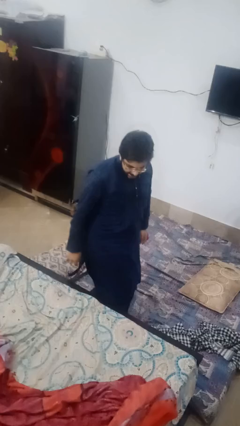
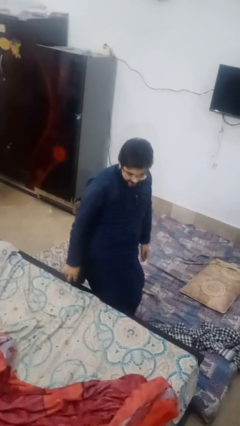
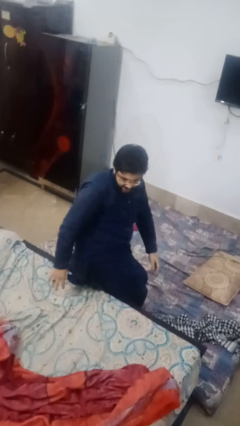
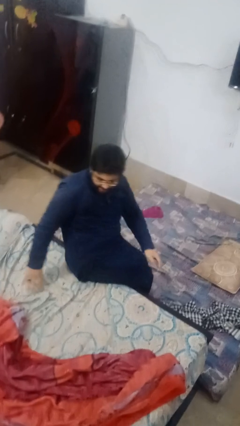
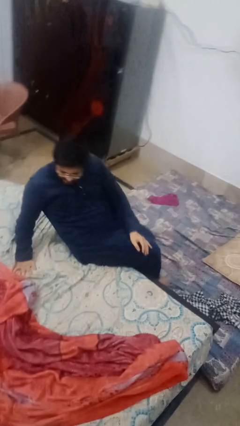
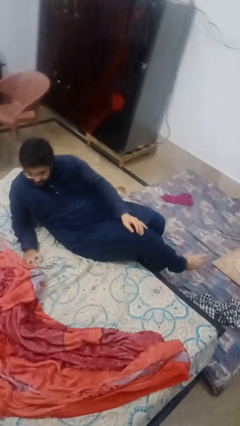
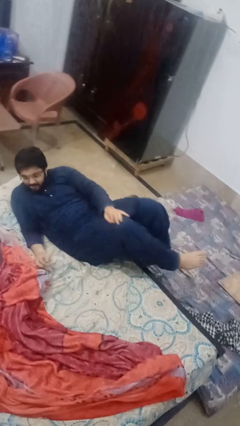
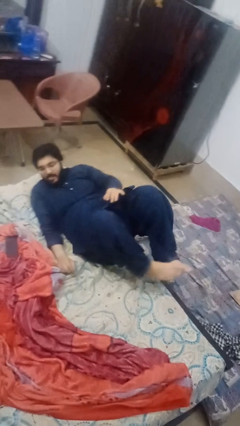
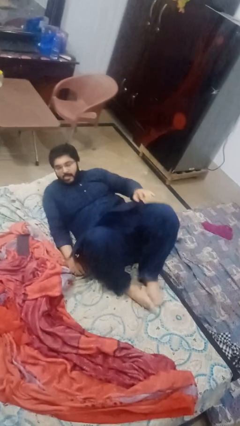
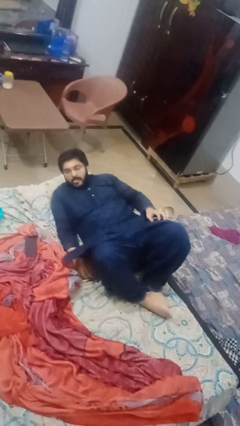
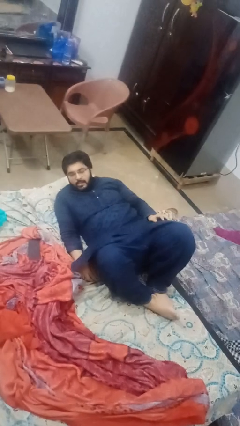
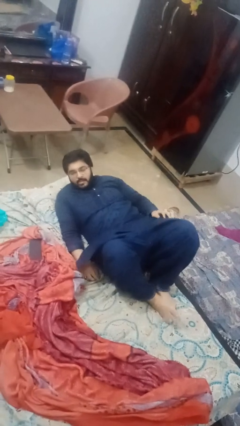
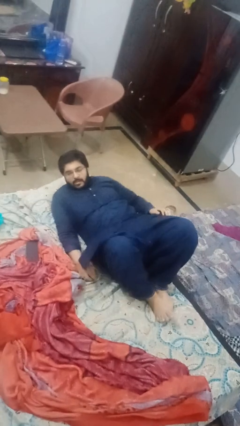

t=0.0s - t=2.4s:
person lies down on bed

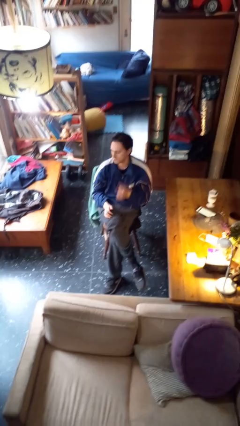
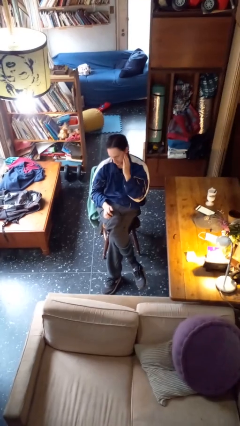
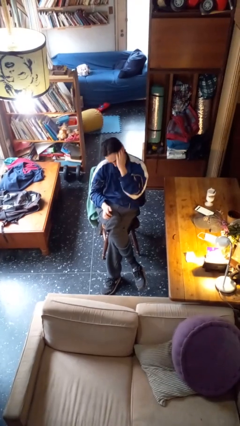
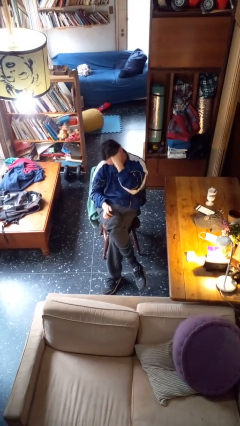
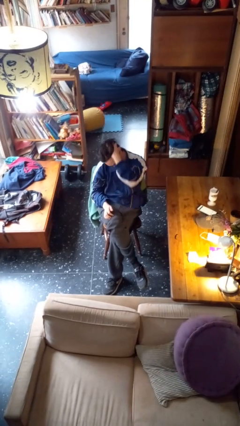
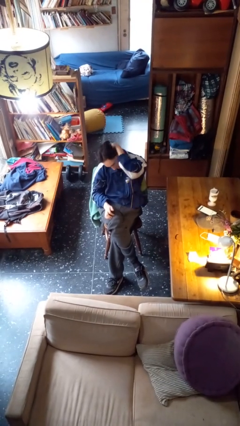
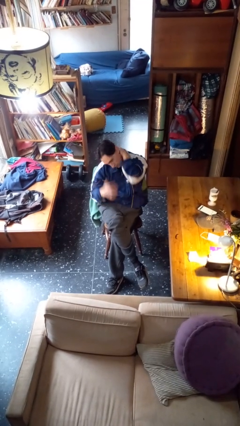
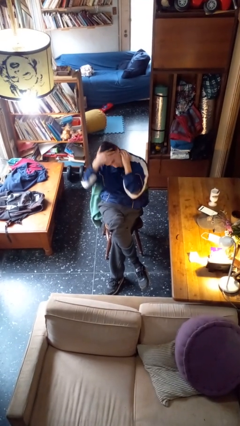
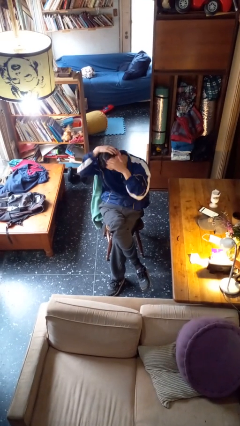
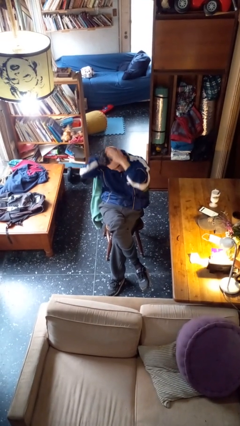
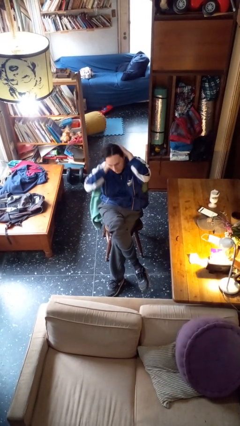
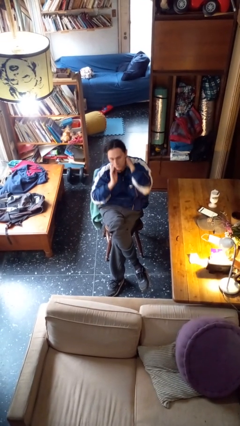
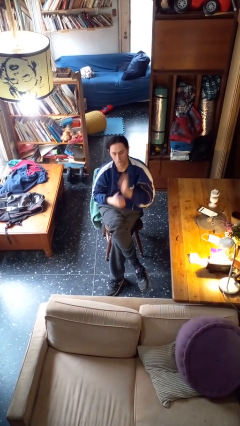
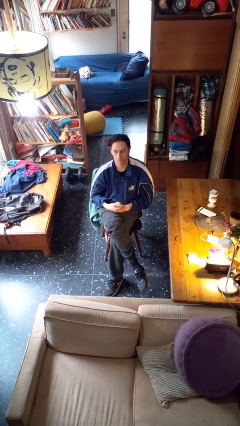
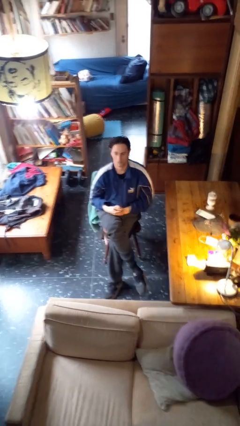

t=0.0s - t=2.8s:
person strokes hair

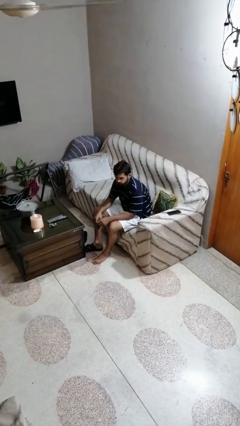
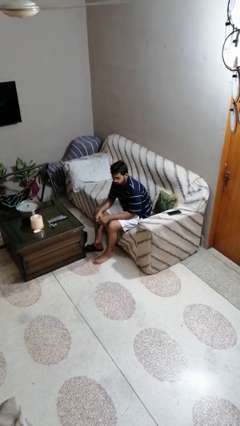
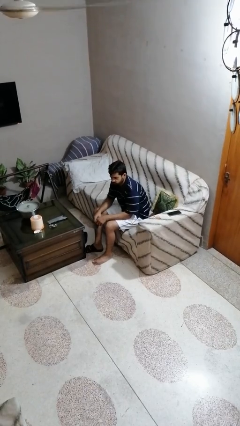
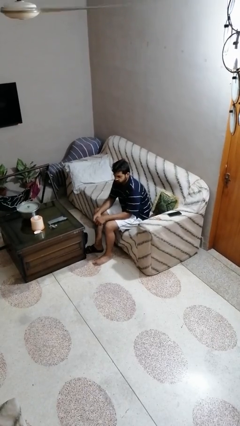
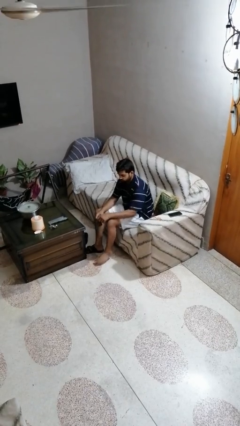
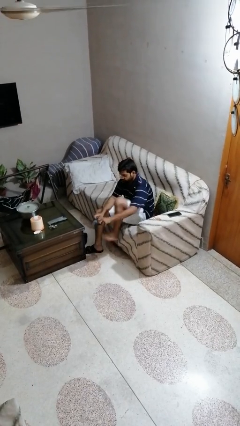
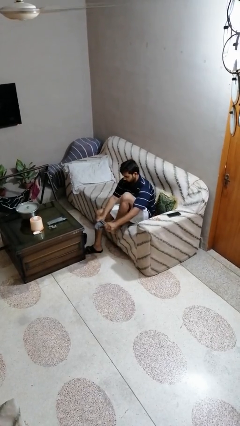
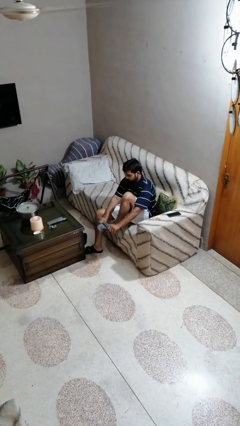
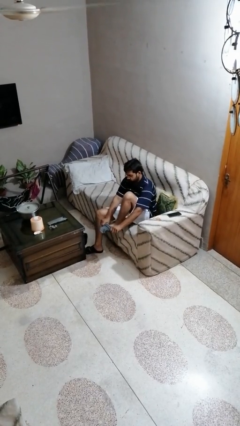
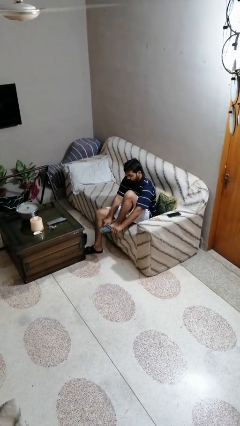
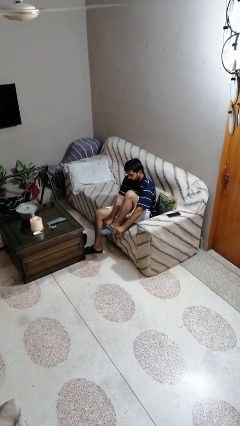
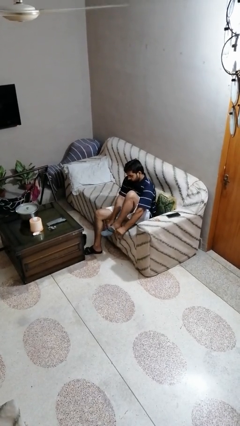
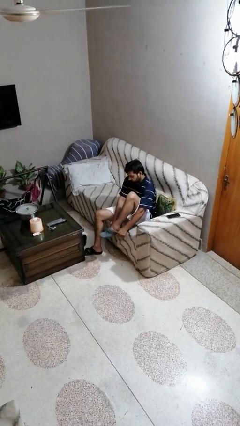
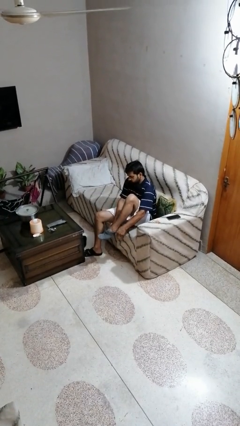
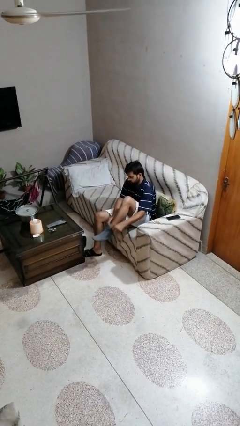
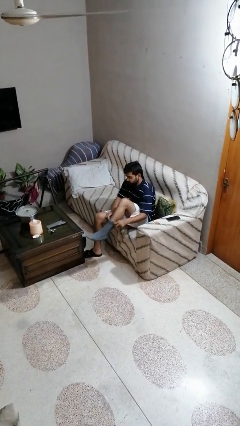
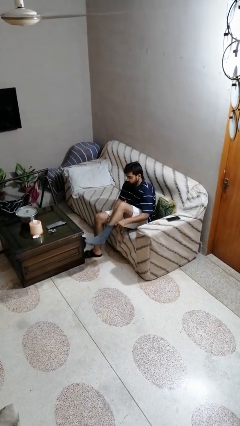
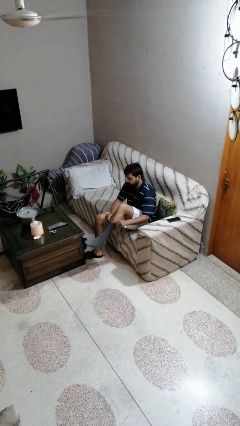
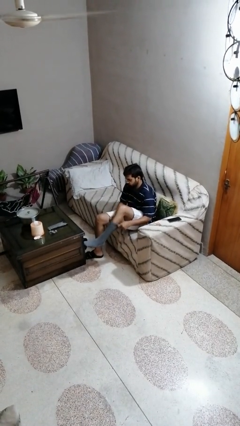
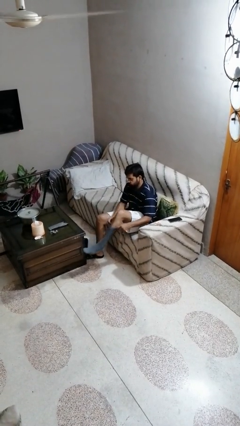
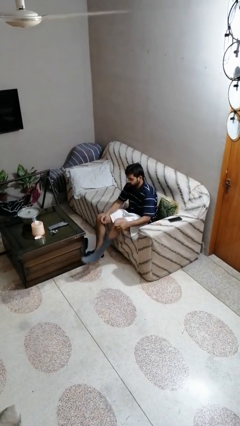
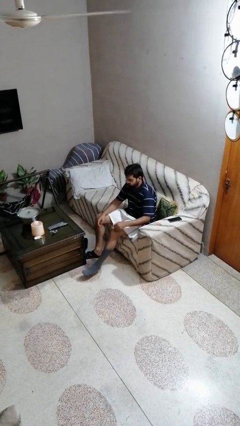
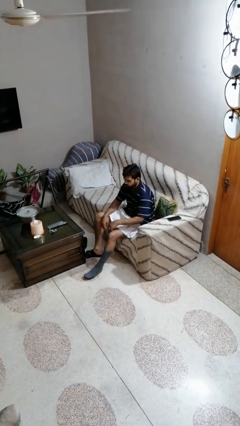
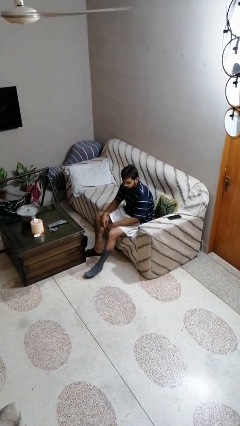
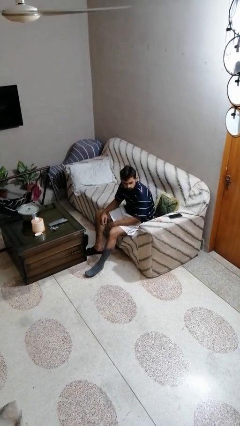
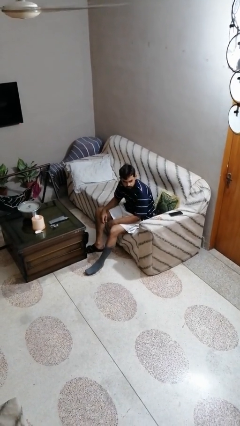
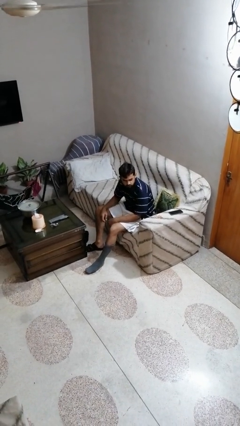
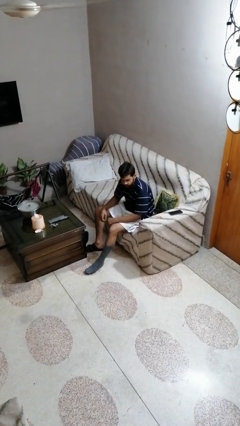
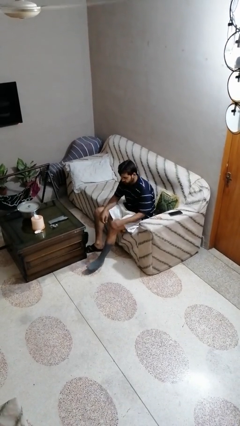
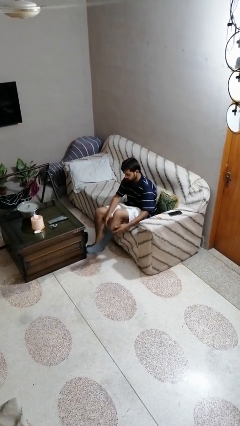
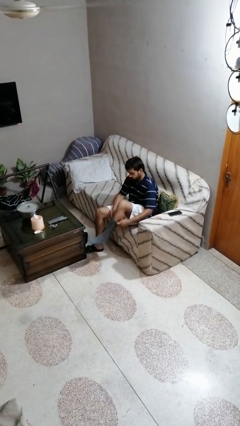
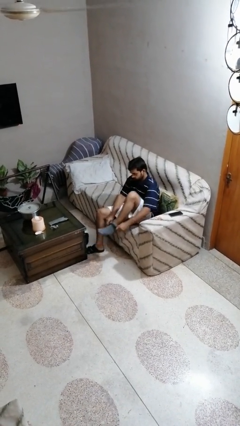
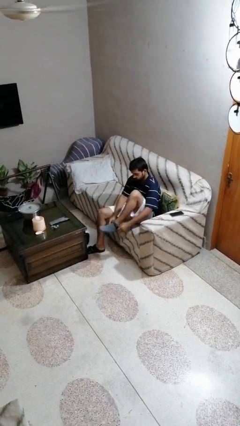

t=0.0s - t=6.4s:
person puts on socks

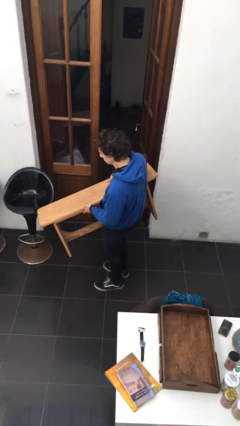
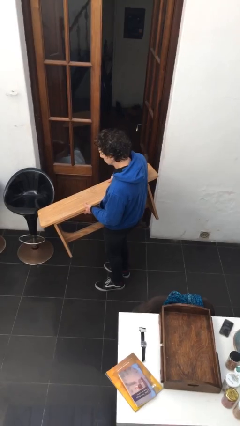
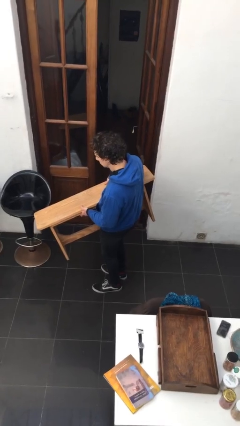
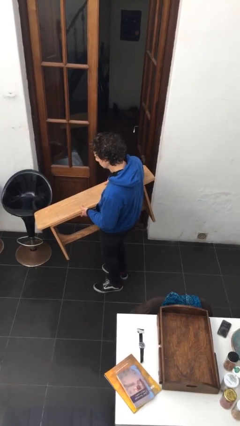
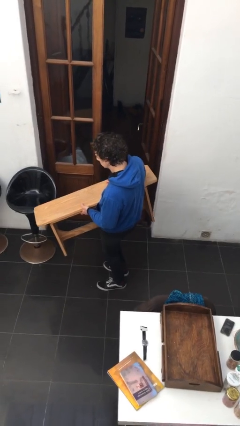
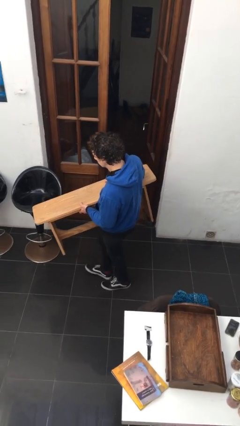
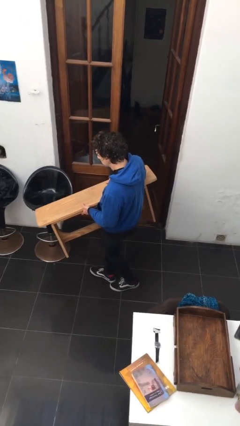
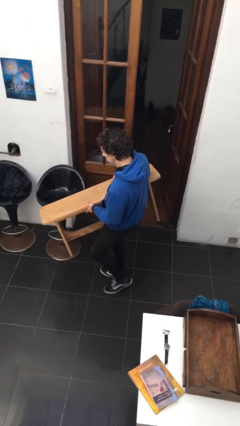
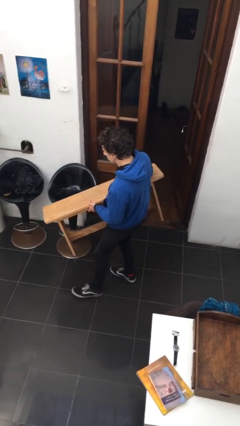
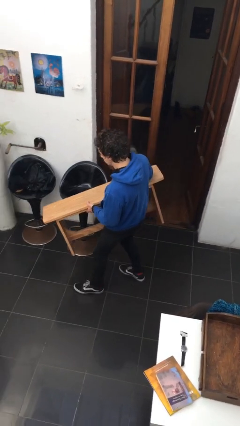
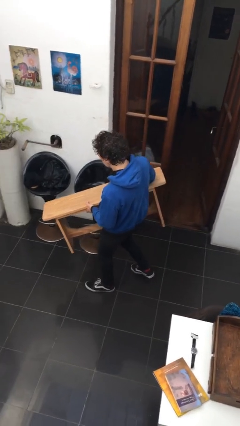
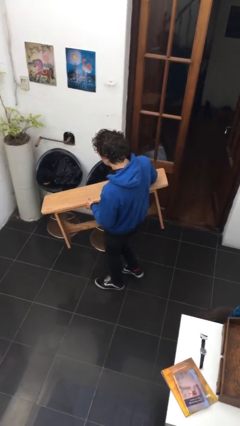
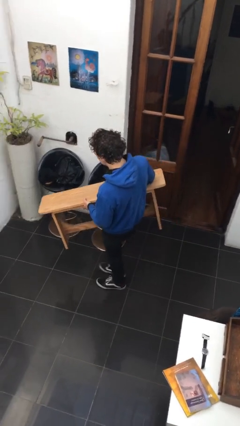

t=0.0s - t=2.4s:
person carries furniture

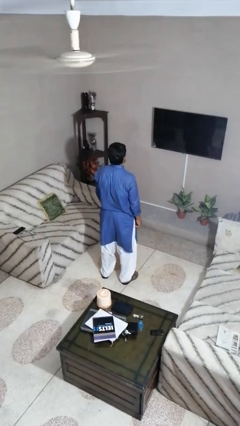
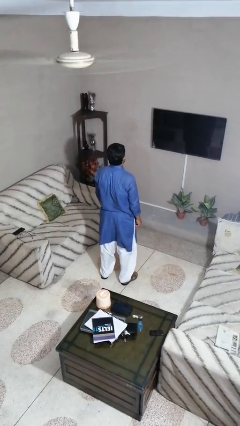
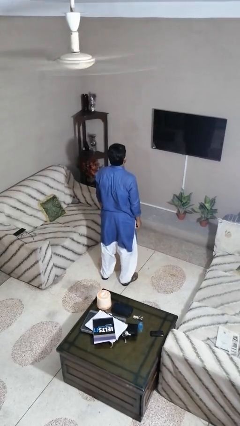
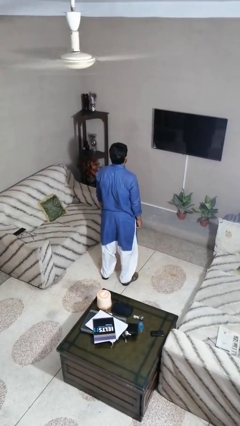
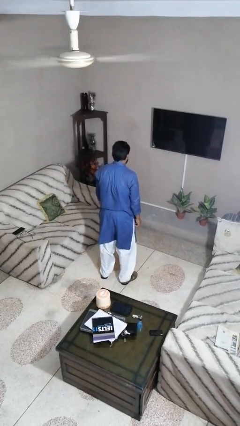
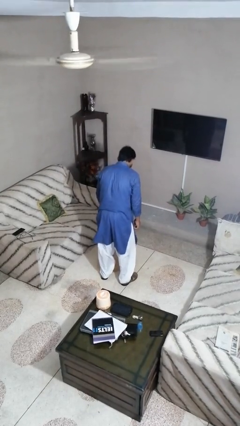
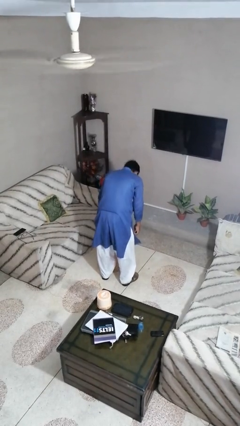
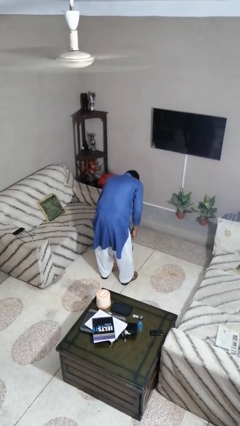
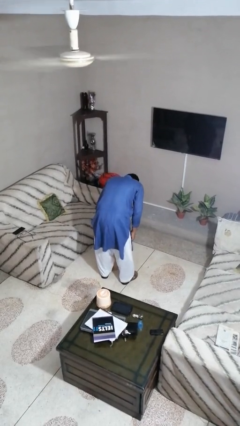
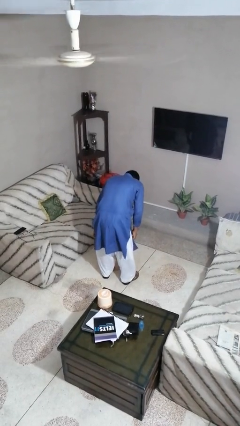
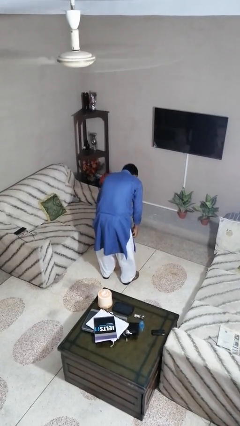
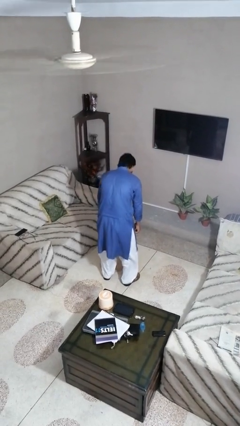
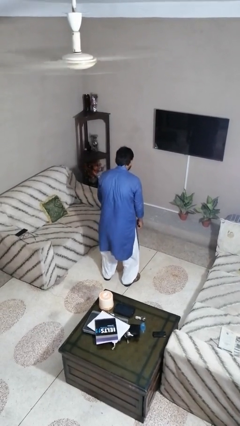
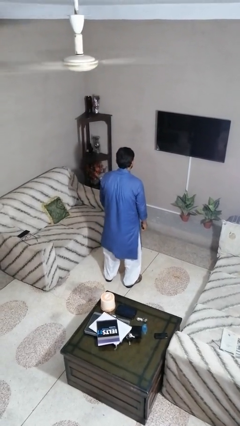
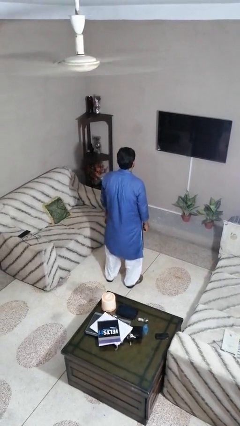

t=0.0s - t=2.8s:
person bows

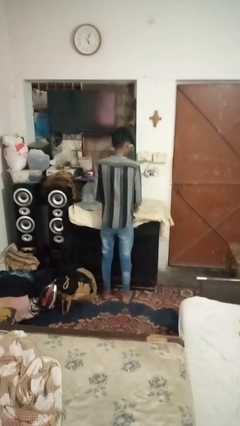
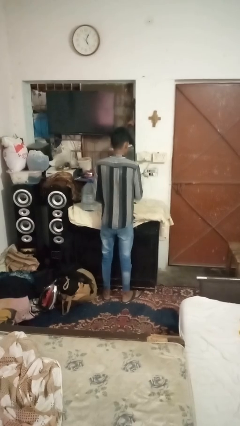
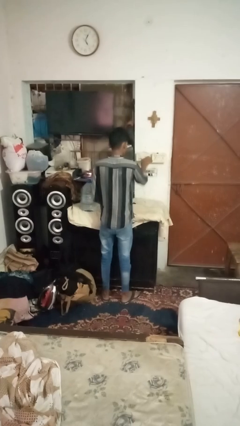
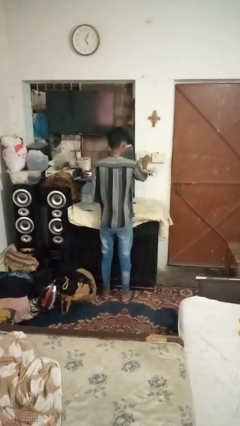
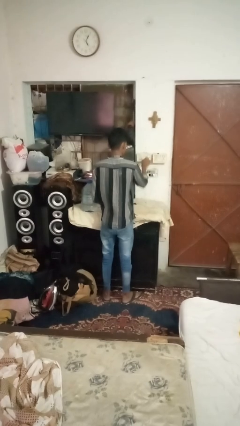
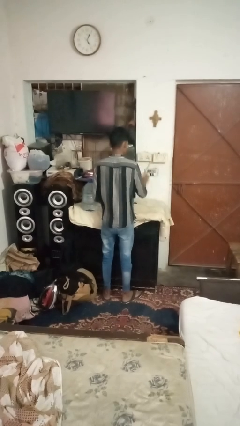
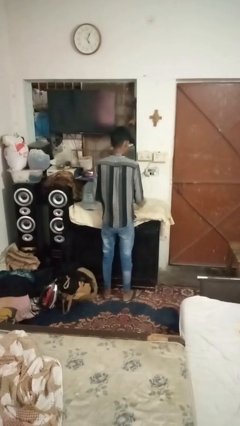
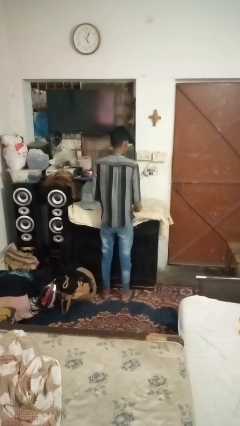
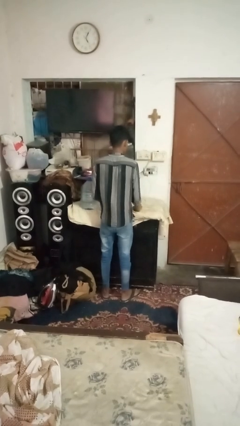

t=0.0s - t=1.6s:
person unplugs from electrical socket
